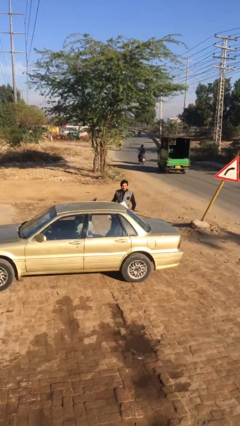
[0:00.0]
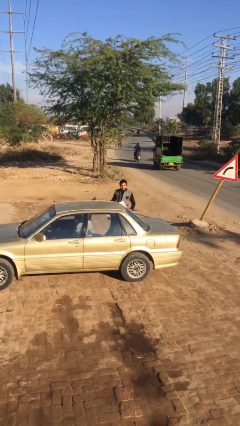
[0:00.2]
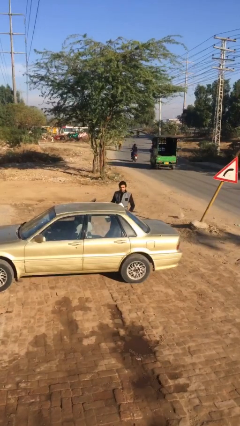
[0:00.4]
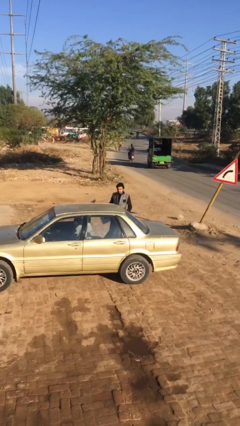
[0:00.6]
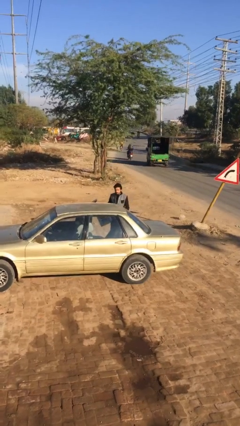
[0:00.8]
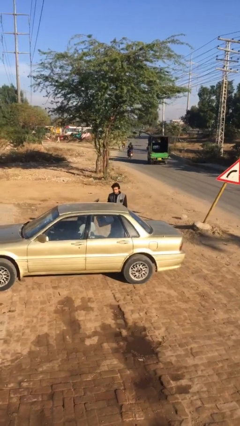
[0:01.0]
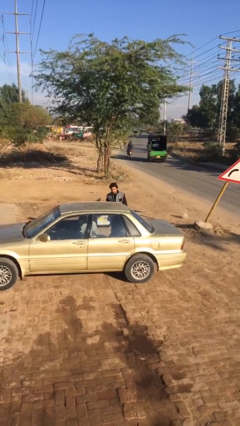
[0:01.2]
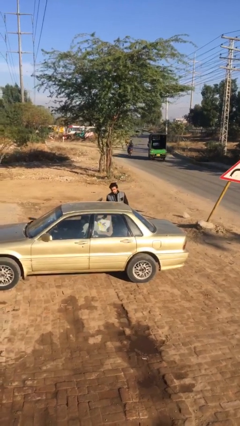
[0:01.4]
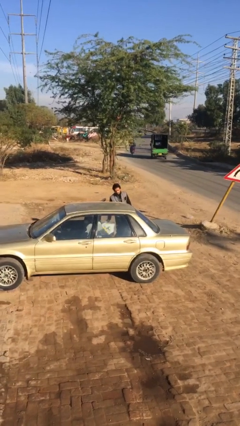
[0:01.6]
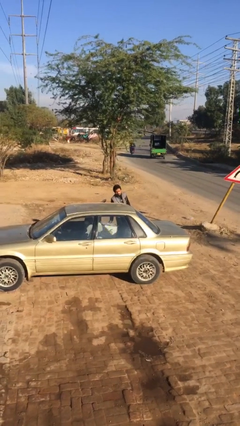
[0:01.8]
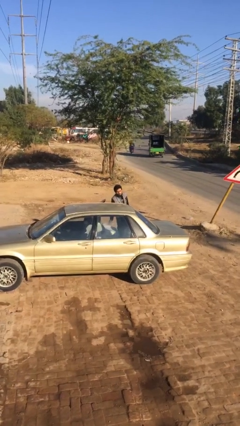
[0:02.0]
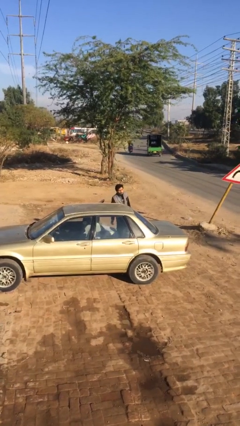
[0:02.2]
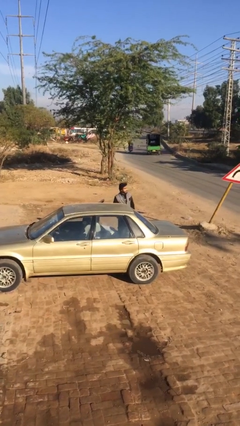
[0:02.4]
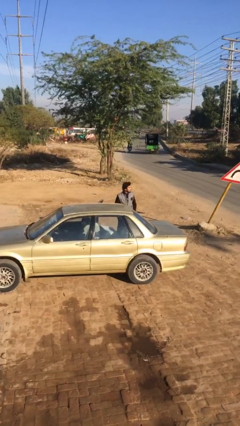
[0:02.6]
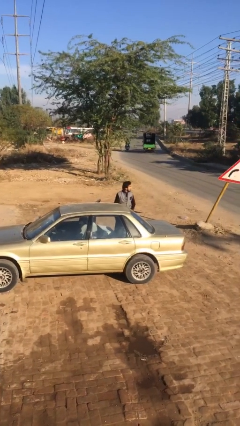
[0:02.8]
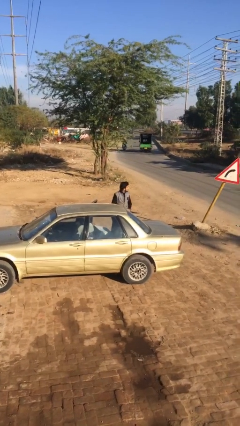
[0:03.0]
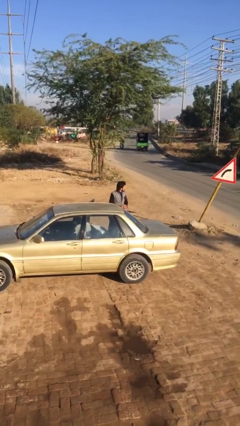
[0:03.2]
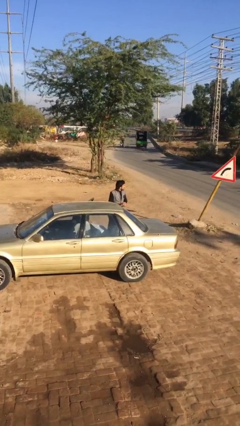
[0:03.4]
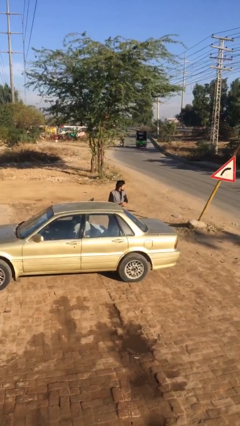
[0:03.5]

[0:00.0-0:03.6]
person loads car

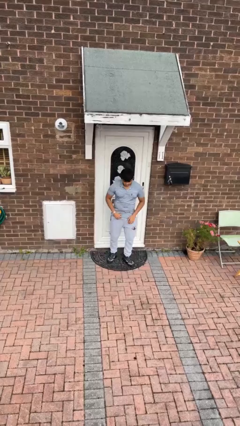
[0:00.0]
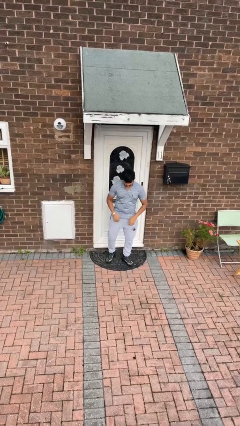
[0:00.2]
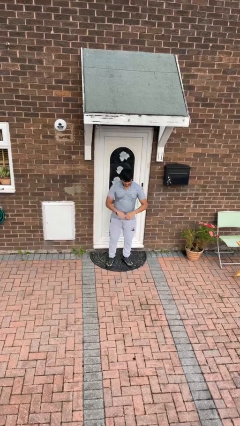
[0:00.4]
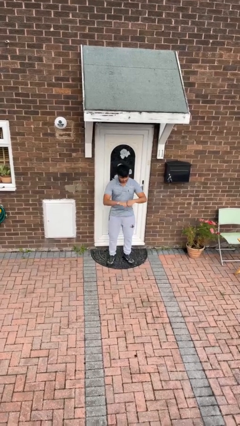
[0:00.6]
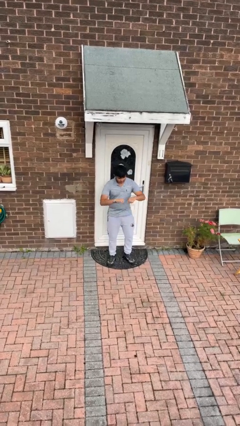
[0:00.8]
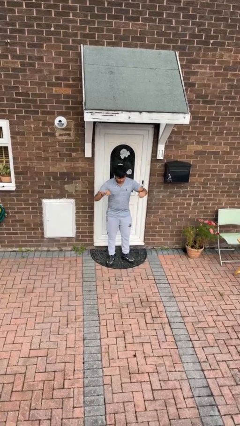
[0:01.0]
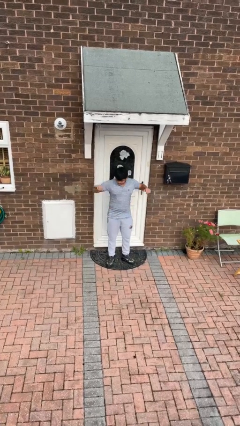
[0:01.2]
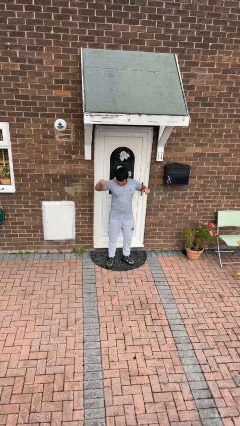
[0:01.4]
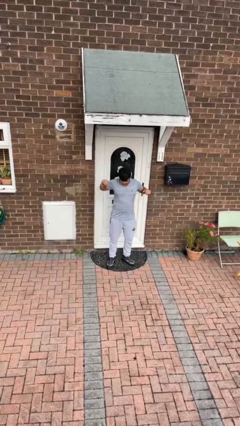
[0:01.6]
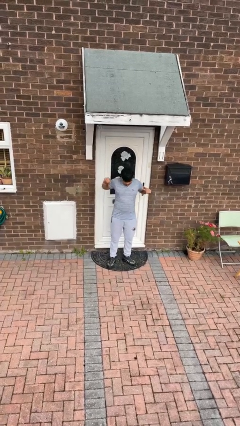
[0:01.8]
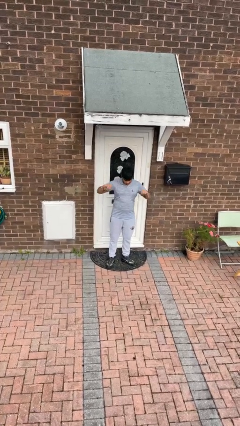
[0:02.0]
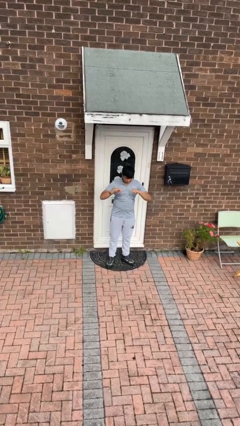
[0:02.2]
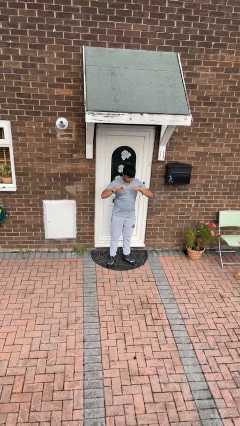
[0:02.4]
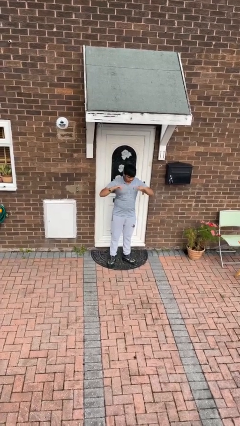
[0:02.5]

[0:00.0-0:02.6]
person stretches arms to side

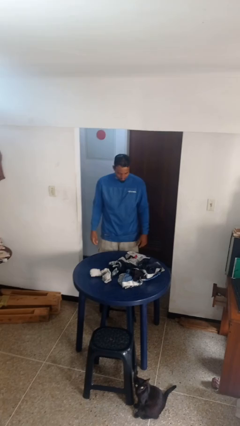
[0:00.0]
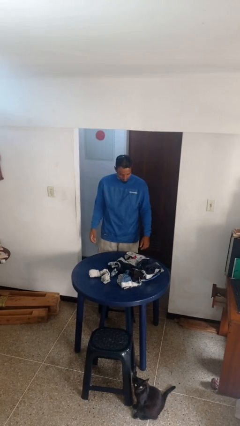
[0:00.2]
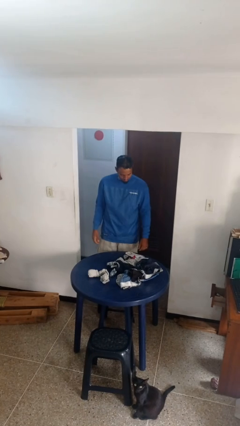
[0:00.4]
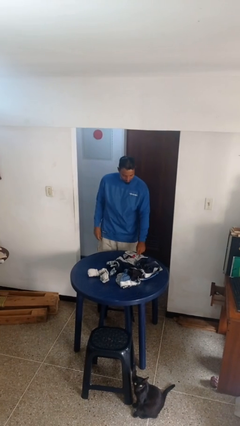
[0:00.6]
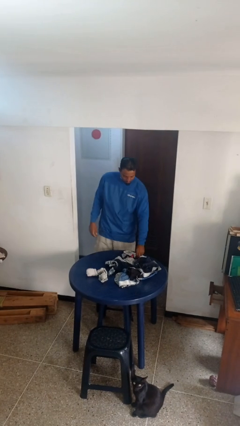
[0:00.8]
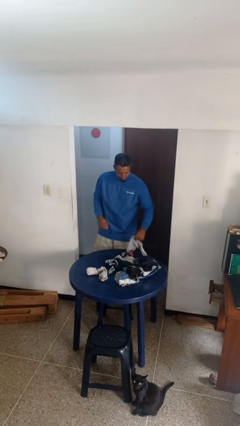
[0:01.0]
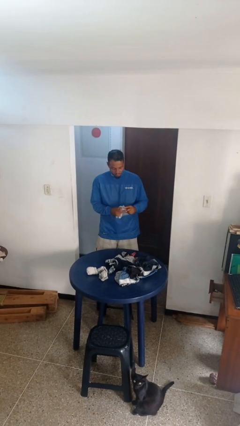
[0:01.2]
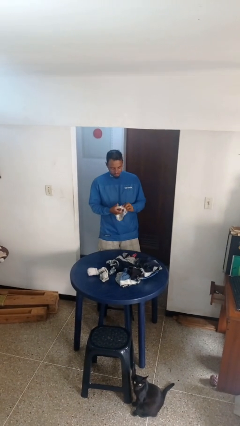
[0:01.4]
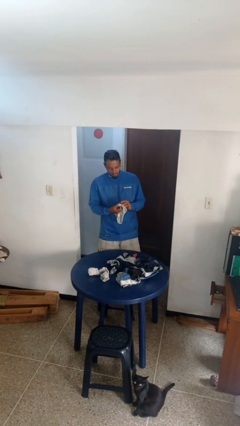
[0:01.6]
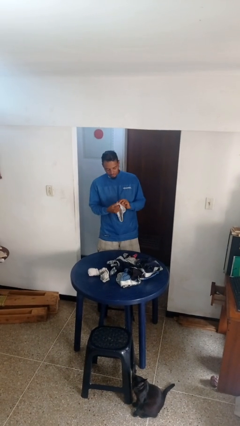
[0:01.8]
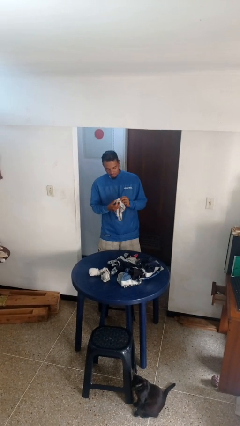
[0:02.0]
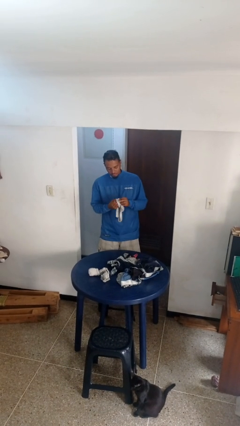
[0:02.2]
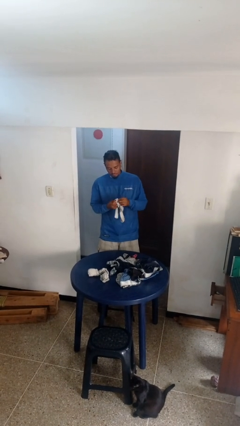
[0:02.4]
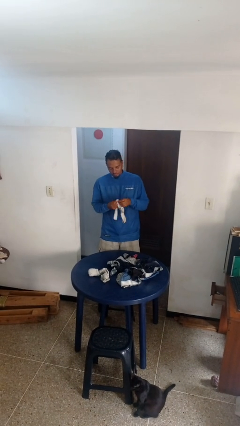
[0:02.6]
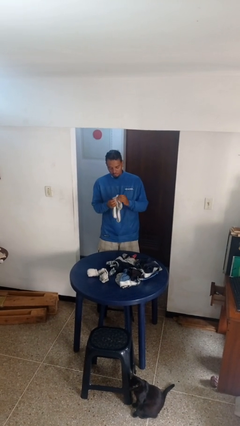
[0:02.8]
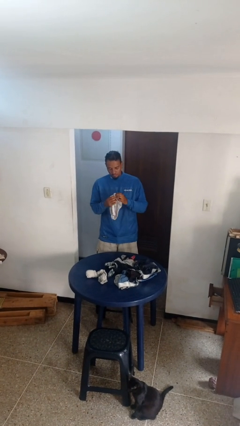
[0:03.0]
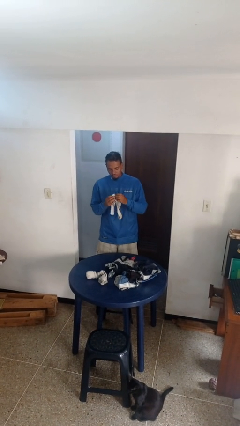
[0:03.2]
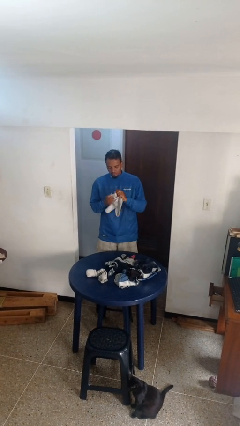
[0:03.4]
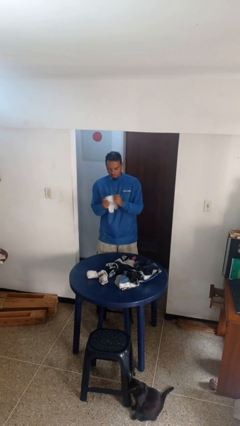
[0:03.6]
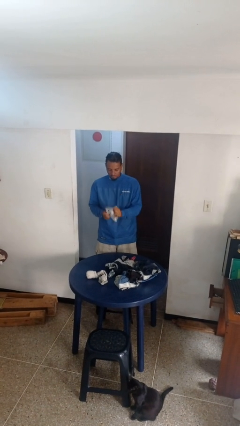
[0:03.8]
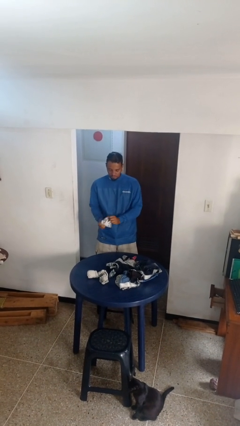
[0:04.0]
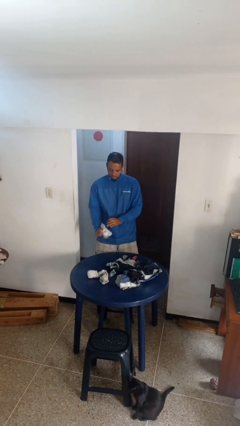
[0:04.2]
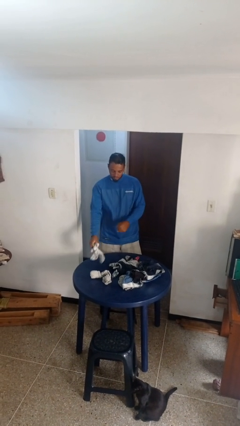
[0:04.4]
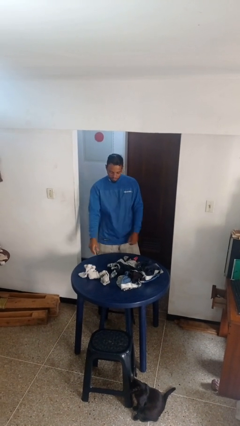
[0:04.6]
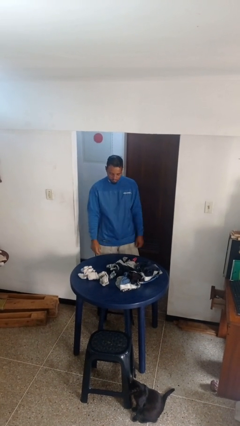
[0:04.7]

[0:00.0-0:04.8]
person folds socks

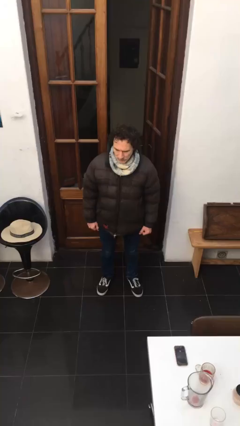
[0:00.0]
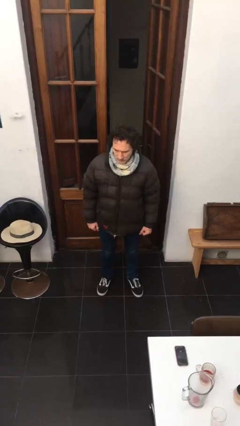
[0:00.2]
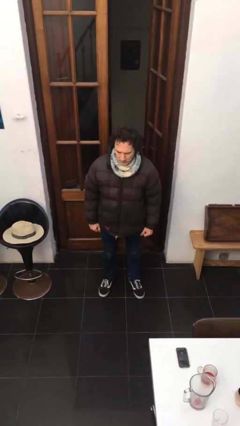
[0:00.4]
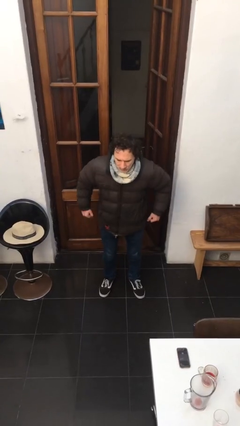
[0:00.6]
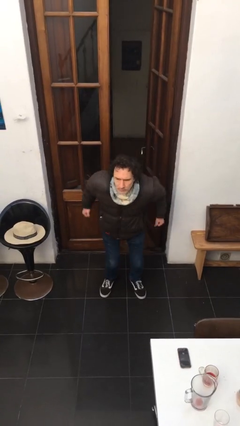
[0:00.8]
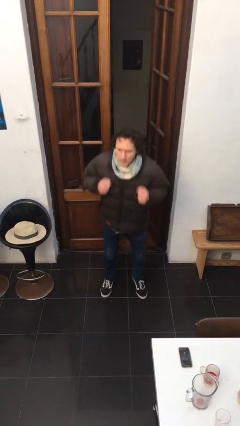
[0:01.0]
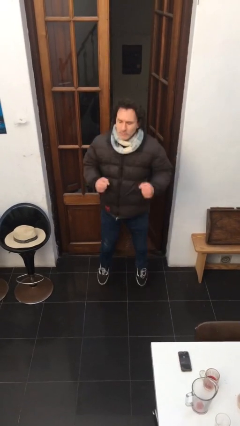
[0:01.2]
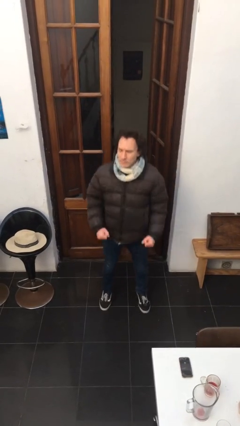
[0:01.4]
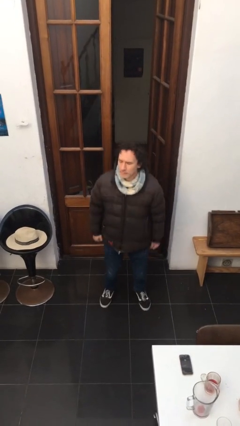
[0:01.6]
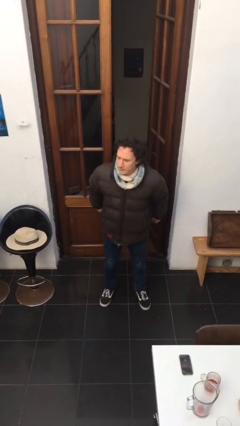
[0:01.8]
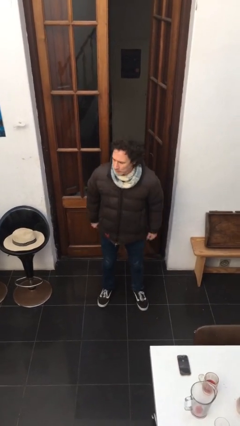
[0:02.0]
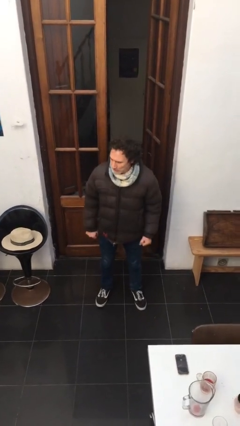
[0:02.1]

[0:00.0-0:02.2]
person jumps

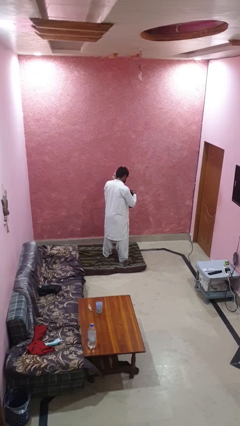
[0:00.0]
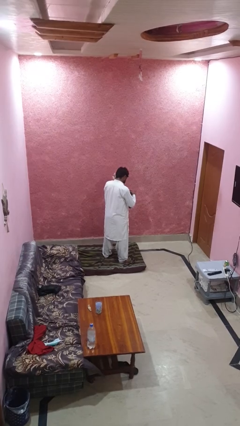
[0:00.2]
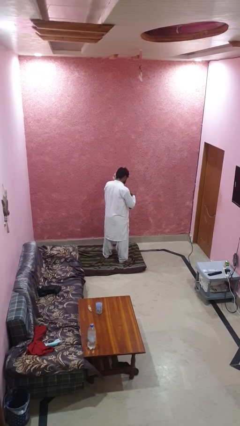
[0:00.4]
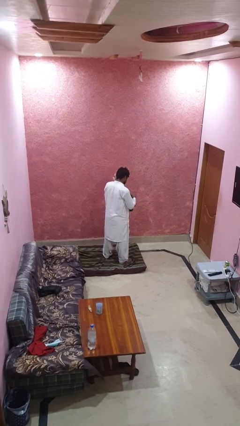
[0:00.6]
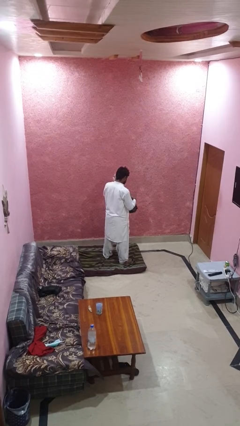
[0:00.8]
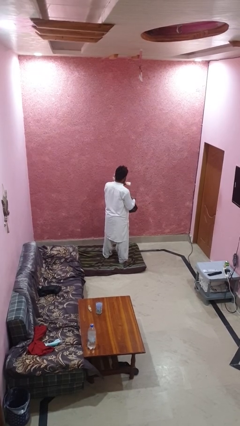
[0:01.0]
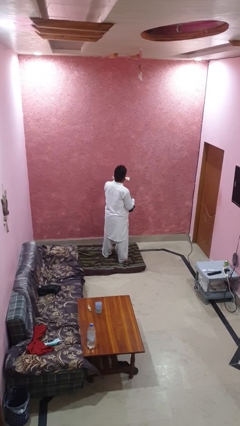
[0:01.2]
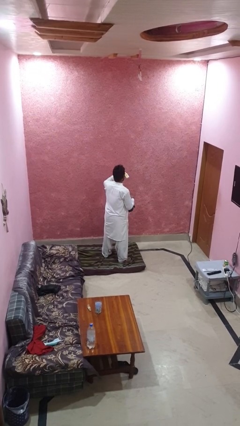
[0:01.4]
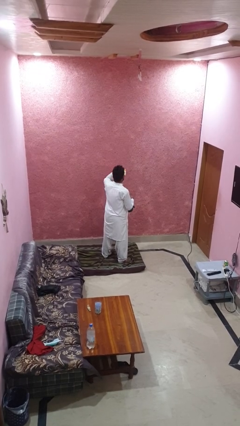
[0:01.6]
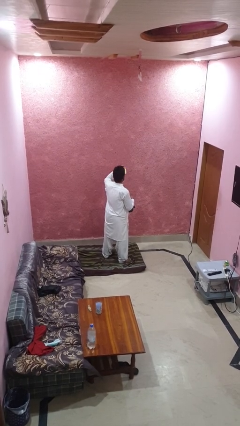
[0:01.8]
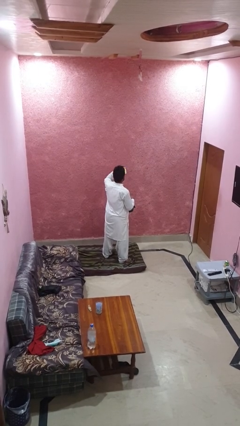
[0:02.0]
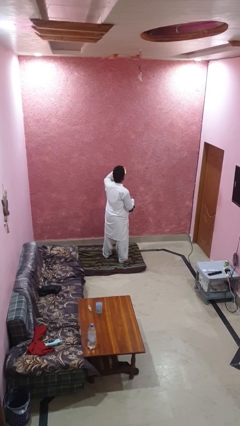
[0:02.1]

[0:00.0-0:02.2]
person takes object from purse

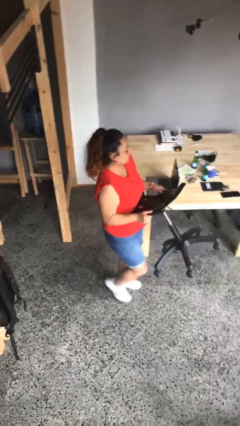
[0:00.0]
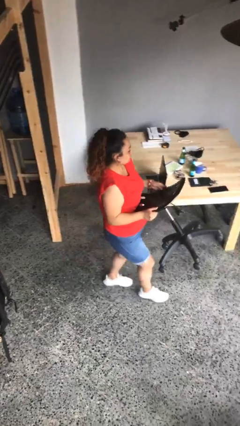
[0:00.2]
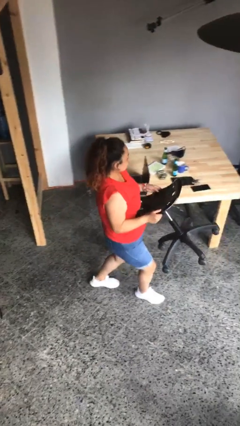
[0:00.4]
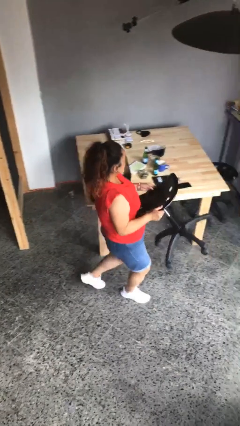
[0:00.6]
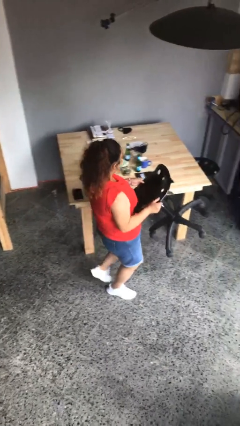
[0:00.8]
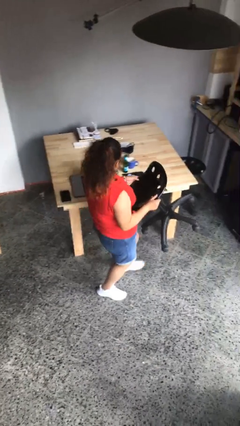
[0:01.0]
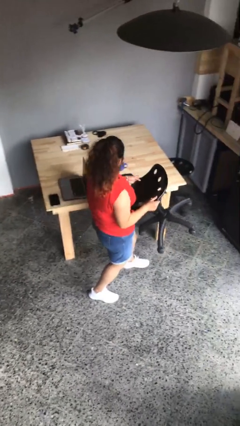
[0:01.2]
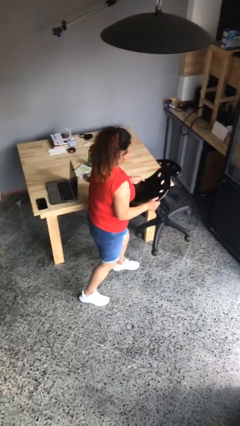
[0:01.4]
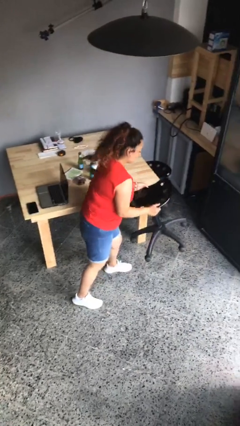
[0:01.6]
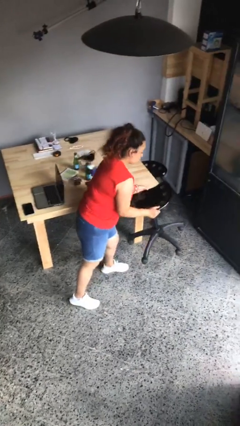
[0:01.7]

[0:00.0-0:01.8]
person carries heavy object

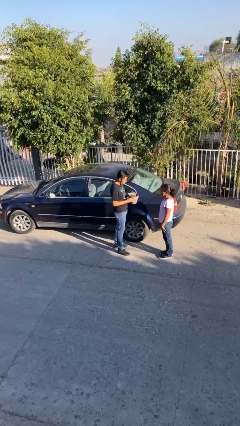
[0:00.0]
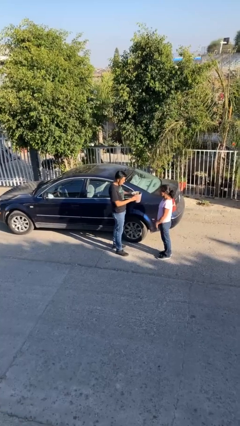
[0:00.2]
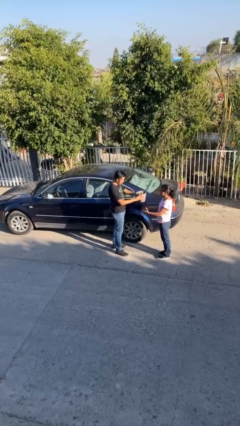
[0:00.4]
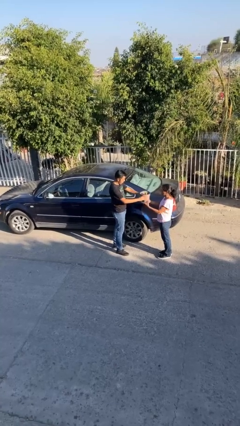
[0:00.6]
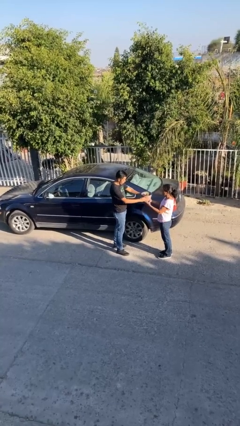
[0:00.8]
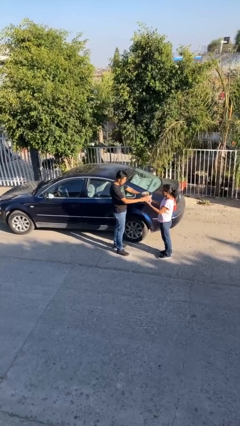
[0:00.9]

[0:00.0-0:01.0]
person transfers object to person
